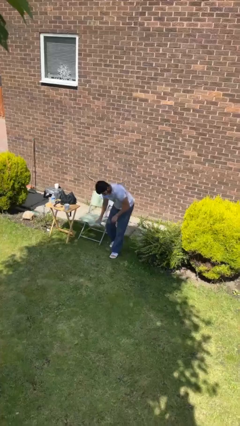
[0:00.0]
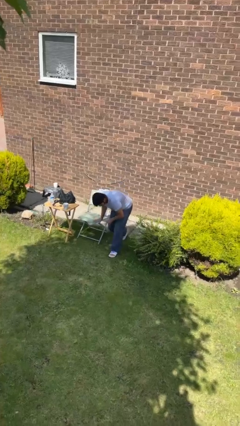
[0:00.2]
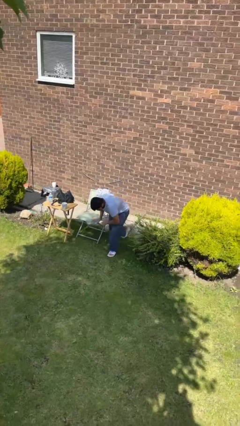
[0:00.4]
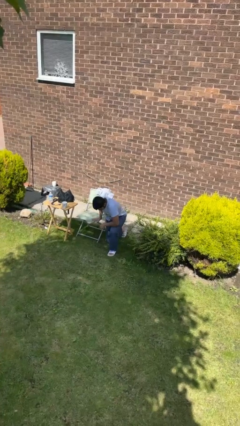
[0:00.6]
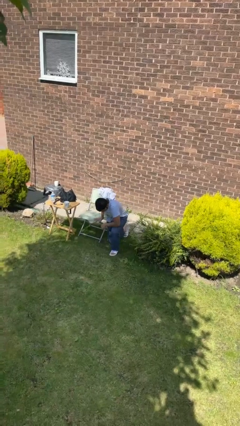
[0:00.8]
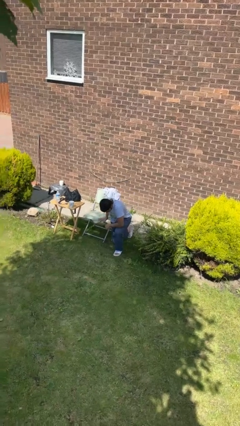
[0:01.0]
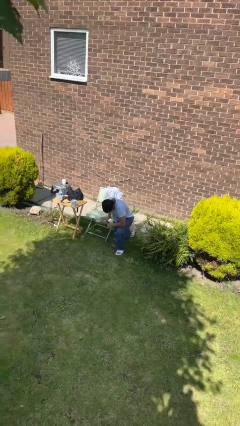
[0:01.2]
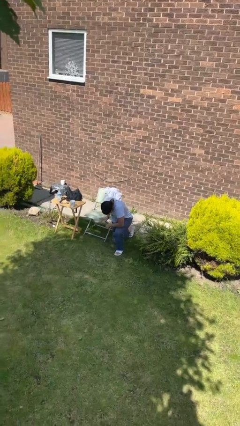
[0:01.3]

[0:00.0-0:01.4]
person kneels

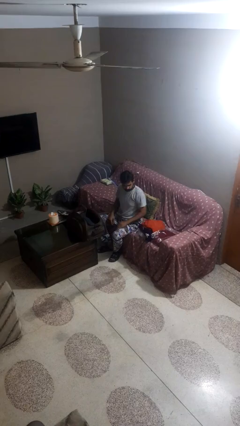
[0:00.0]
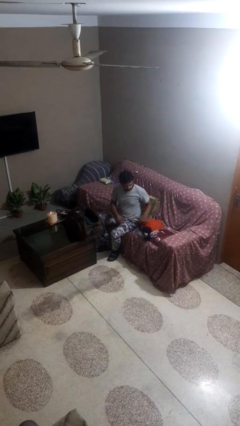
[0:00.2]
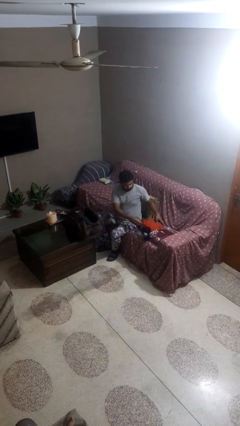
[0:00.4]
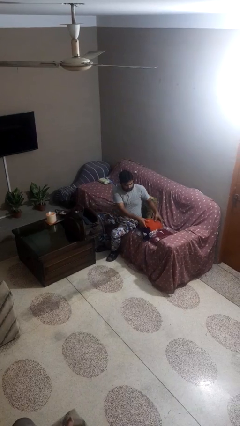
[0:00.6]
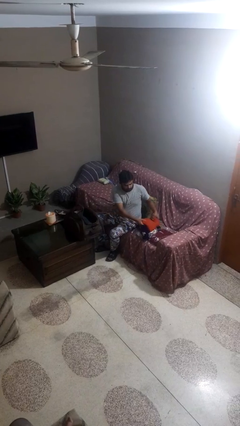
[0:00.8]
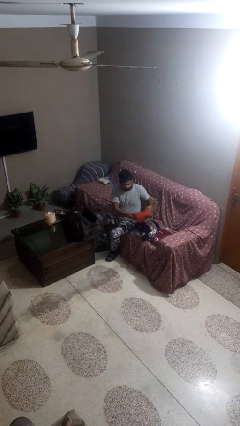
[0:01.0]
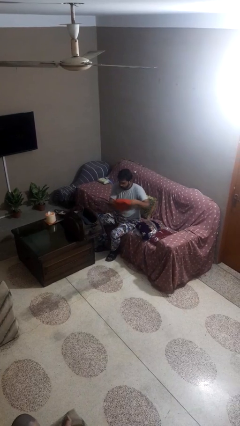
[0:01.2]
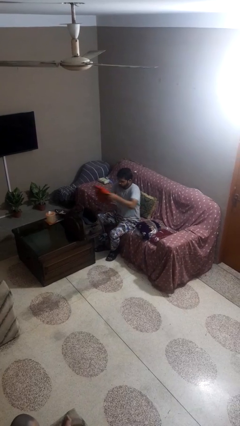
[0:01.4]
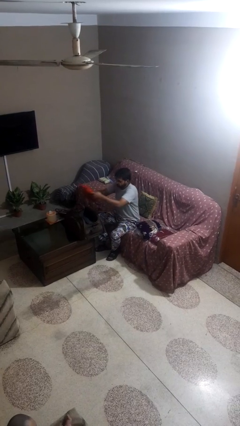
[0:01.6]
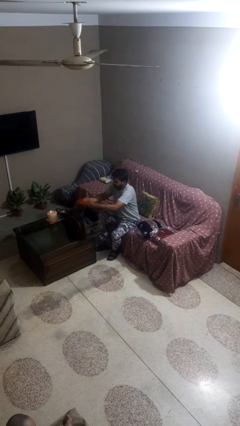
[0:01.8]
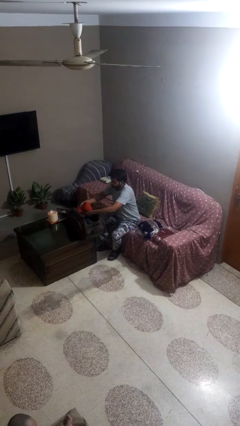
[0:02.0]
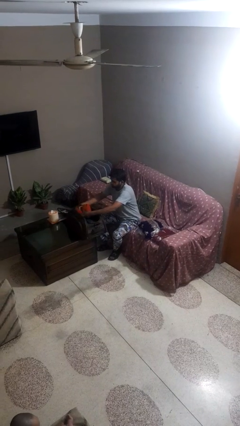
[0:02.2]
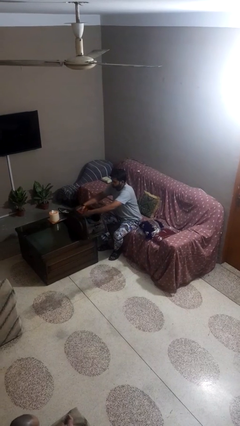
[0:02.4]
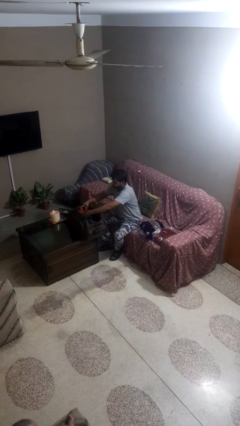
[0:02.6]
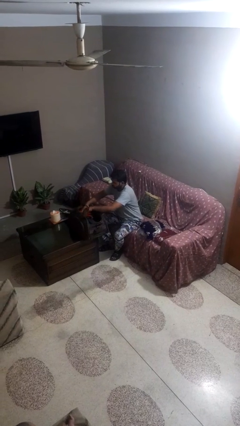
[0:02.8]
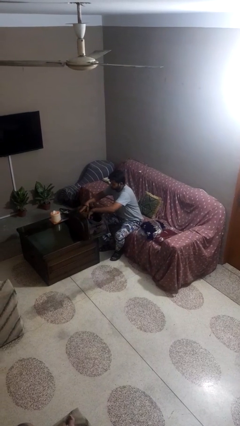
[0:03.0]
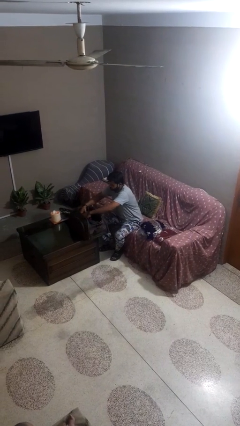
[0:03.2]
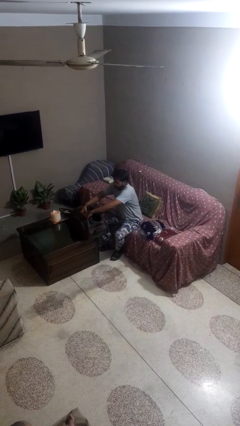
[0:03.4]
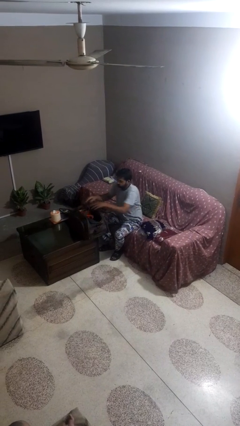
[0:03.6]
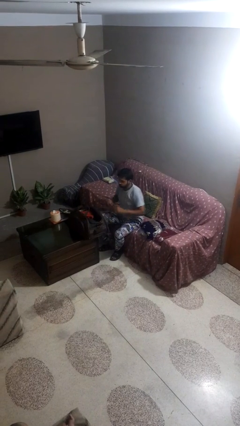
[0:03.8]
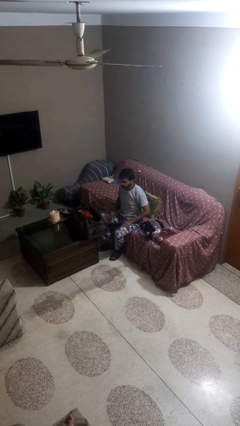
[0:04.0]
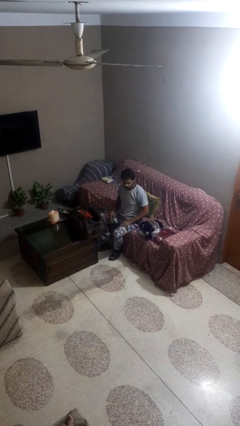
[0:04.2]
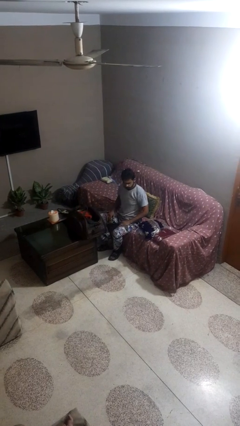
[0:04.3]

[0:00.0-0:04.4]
person loads clothes into suitcase

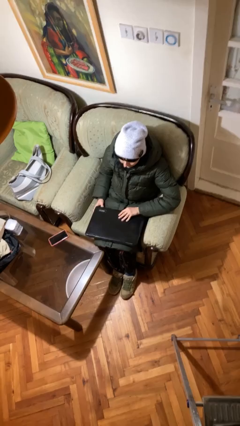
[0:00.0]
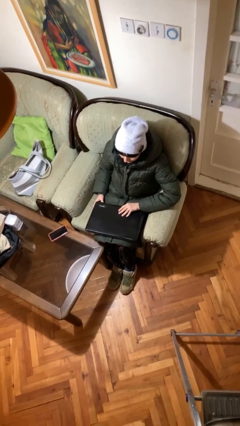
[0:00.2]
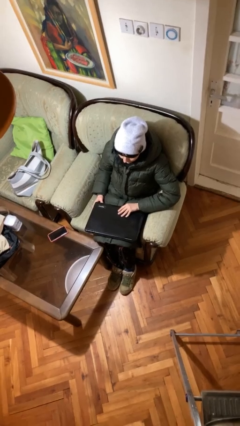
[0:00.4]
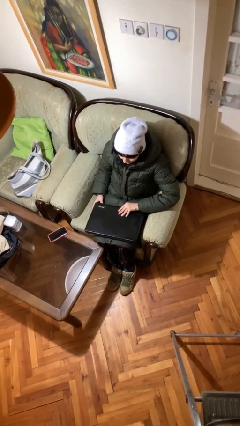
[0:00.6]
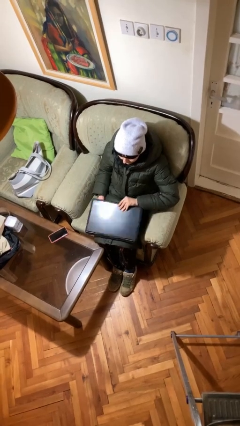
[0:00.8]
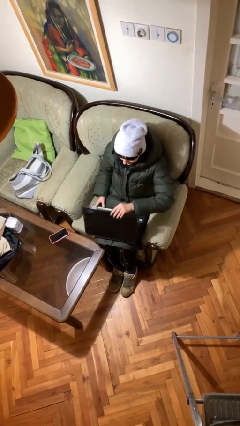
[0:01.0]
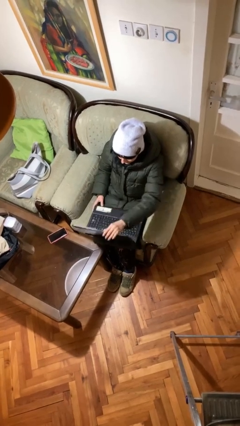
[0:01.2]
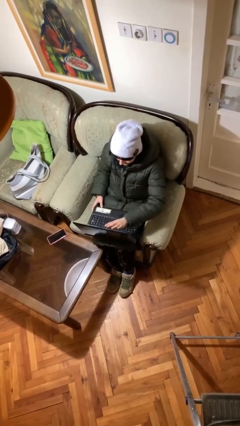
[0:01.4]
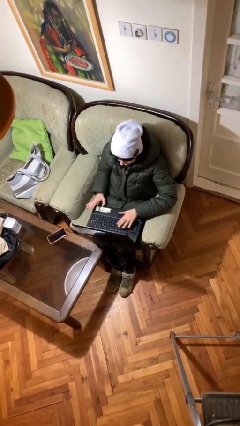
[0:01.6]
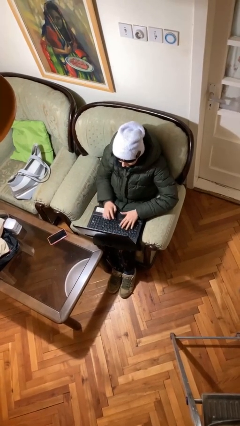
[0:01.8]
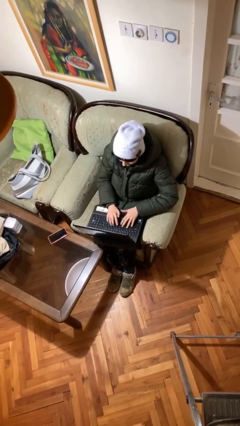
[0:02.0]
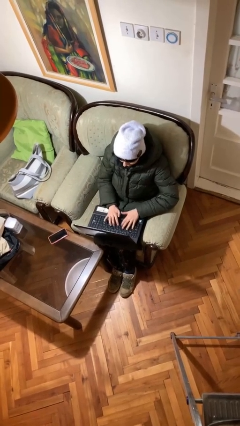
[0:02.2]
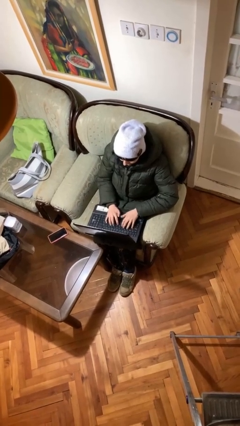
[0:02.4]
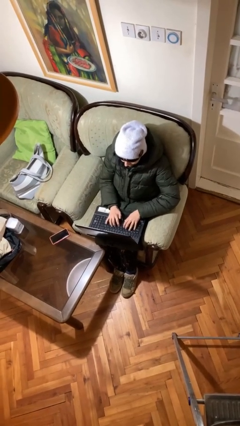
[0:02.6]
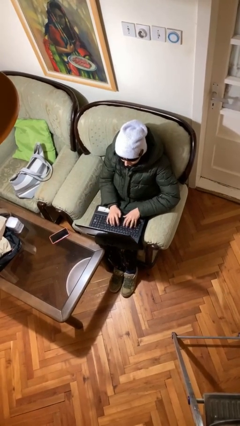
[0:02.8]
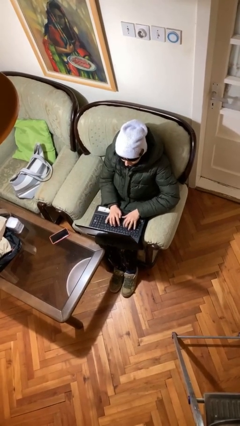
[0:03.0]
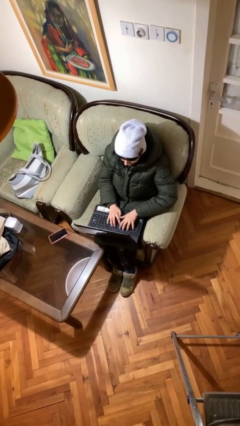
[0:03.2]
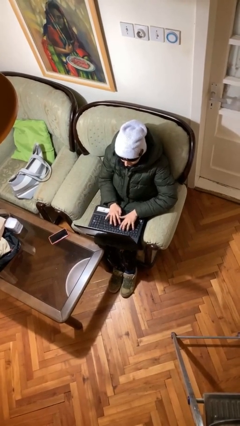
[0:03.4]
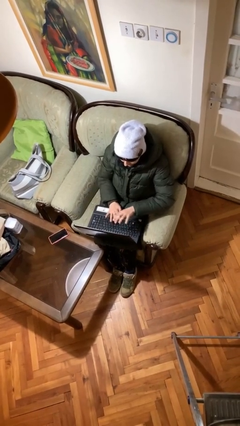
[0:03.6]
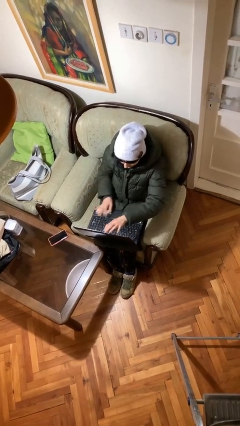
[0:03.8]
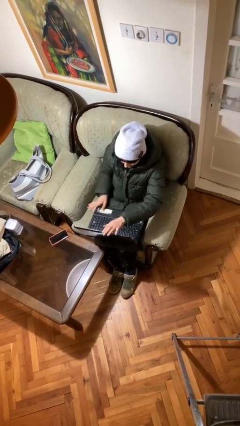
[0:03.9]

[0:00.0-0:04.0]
person interacts with laptop

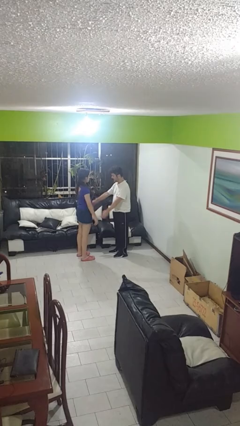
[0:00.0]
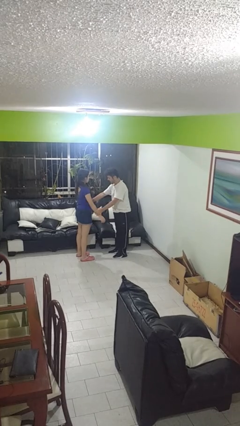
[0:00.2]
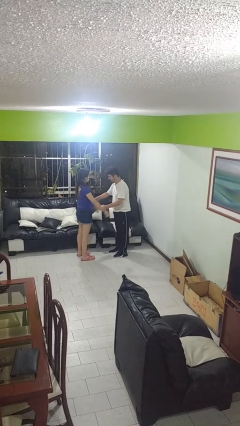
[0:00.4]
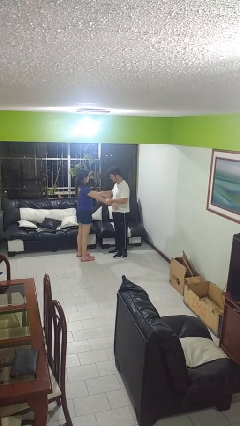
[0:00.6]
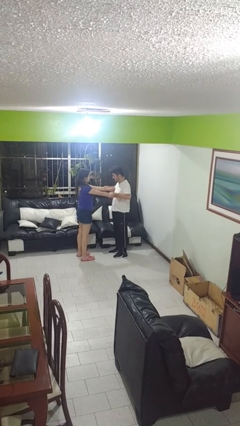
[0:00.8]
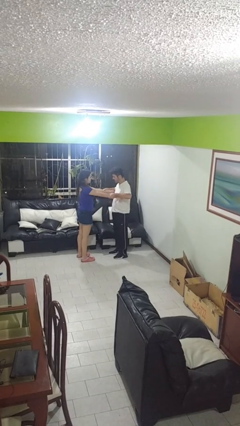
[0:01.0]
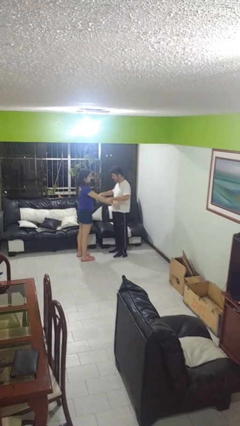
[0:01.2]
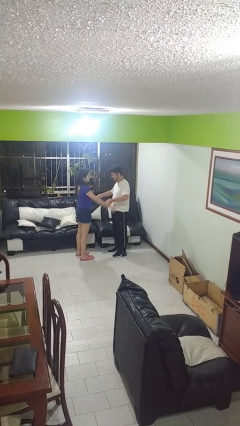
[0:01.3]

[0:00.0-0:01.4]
person grabs person by forearm

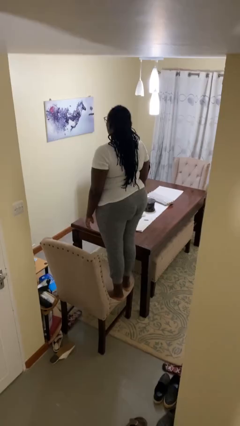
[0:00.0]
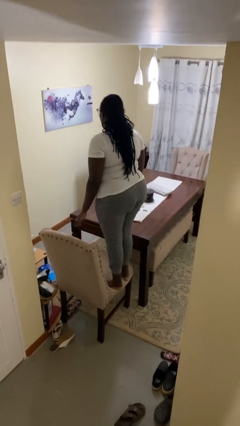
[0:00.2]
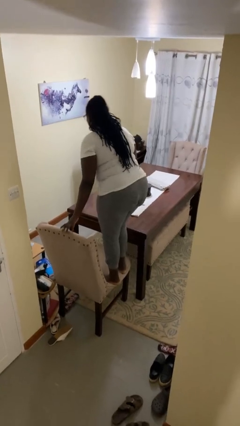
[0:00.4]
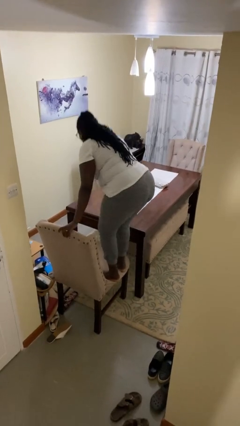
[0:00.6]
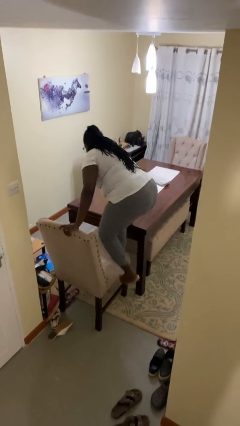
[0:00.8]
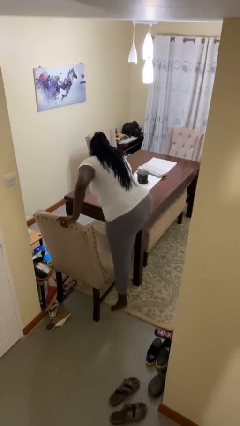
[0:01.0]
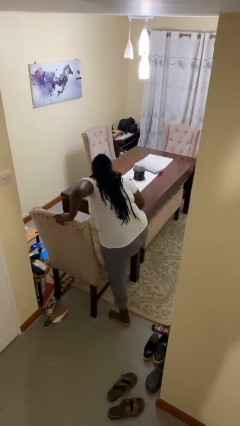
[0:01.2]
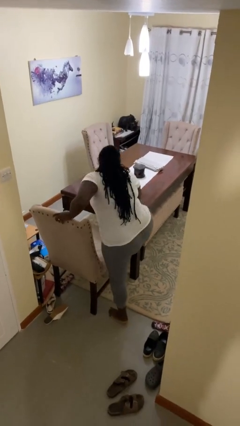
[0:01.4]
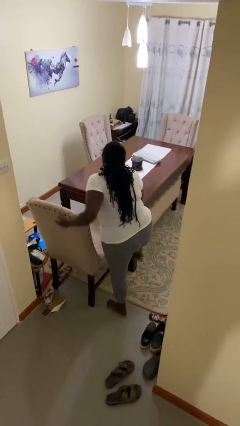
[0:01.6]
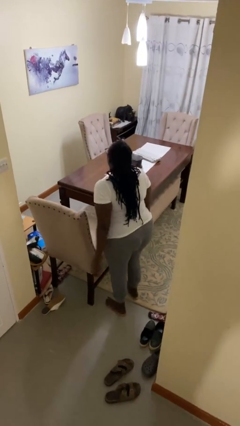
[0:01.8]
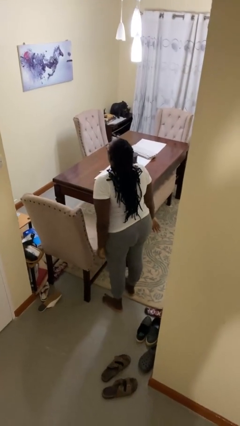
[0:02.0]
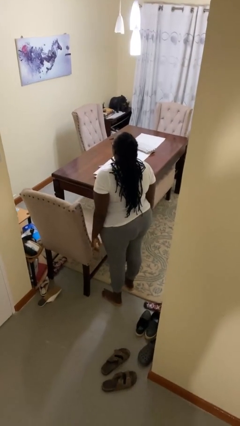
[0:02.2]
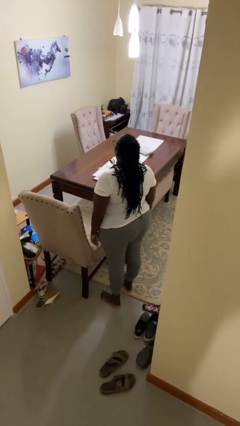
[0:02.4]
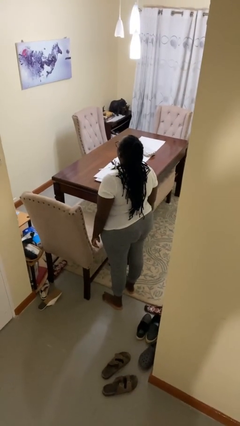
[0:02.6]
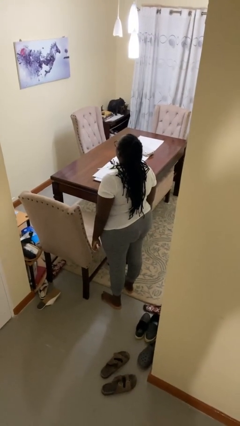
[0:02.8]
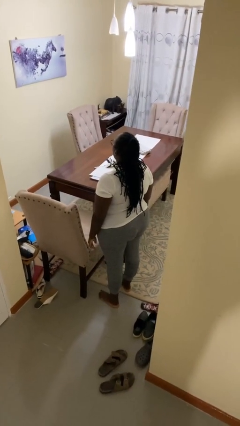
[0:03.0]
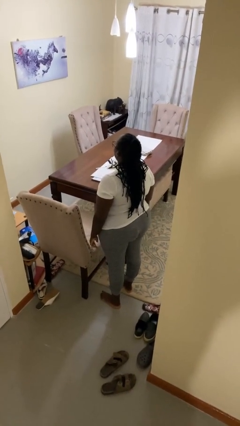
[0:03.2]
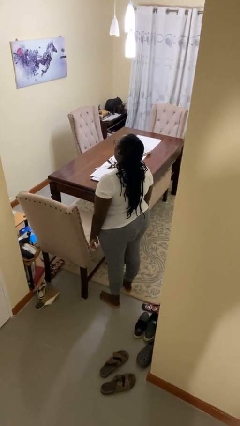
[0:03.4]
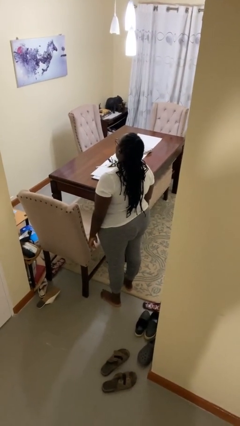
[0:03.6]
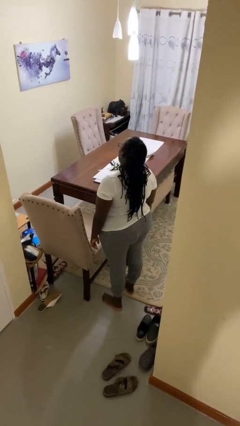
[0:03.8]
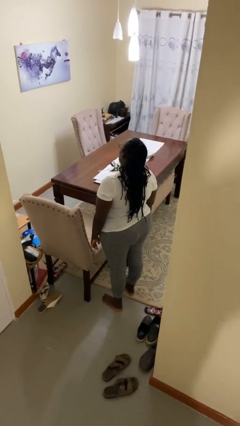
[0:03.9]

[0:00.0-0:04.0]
person climbs off chair

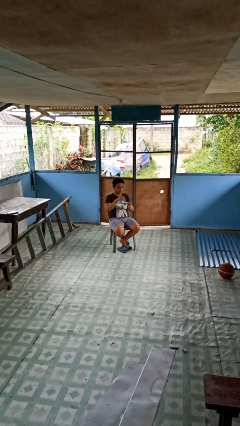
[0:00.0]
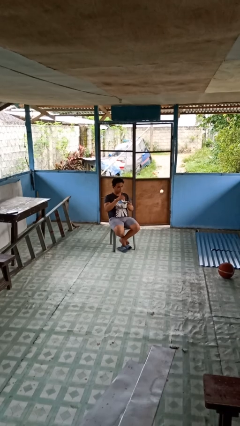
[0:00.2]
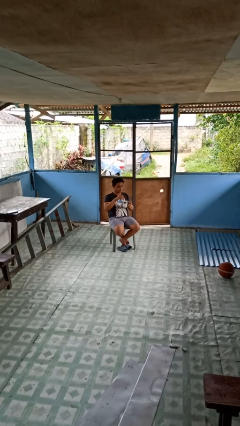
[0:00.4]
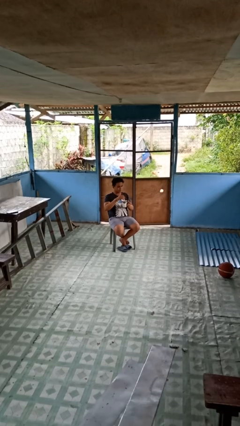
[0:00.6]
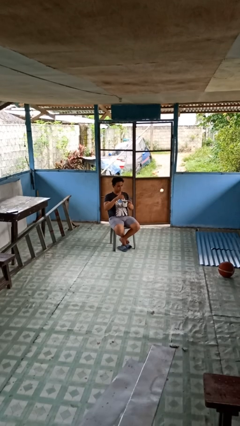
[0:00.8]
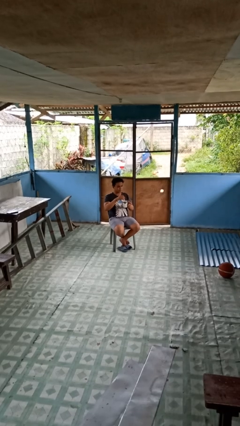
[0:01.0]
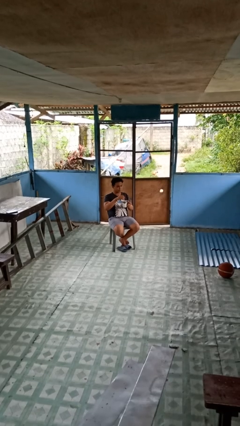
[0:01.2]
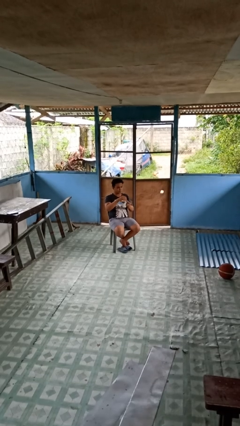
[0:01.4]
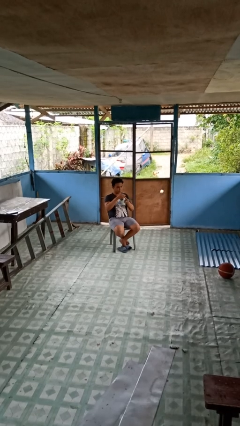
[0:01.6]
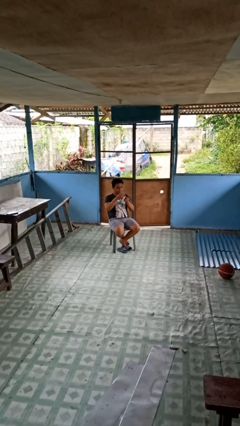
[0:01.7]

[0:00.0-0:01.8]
person stirs mug

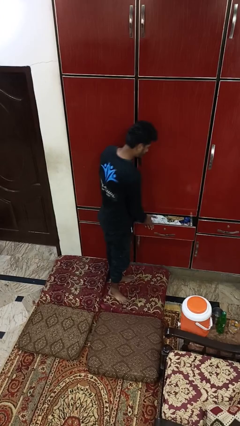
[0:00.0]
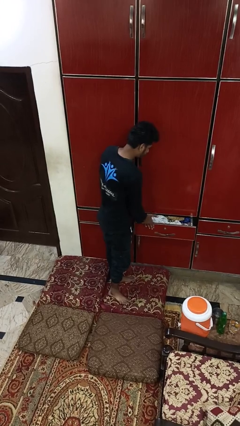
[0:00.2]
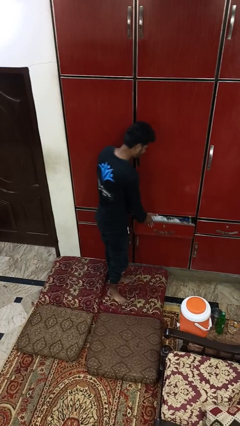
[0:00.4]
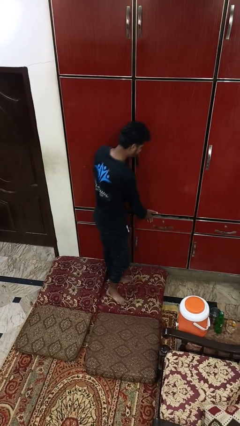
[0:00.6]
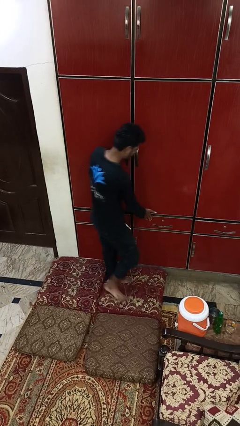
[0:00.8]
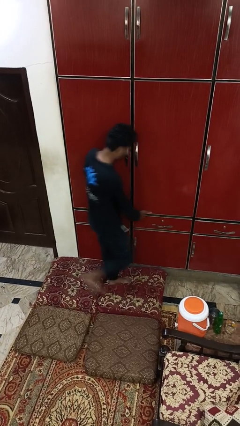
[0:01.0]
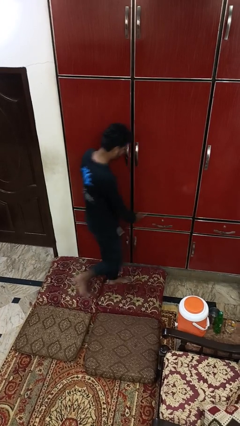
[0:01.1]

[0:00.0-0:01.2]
person closes dresser drawer
